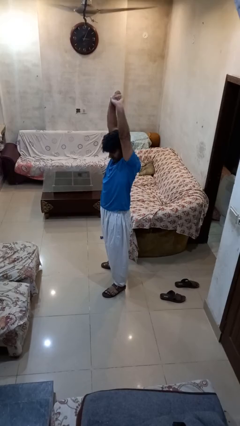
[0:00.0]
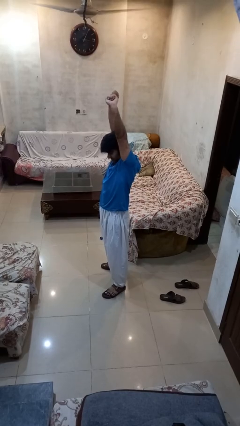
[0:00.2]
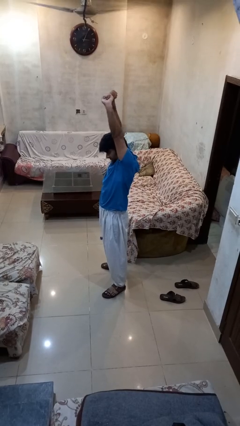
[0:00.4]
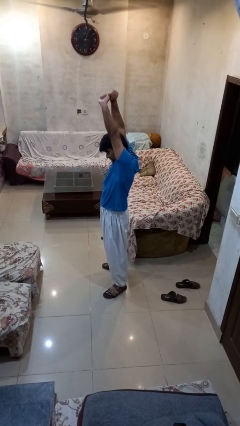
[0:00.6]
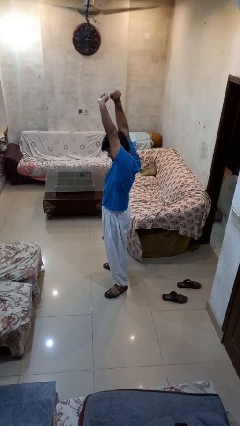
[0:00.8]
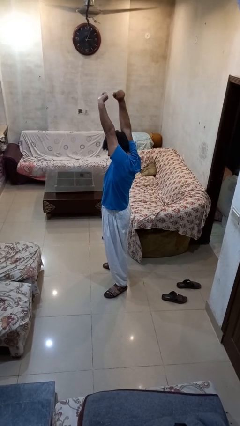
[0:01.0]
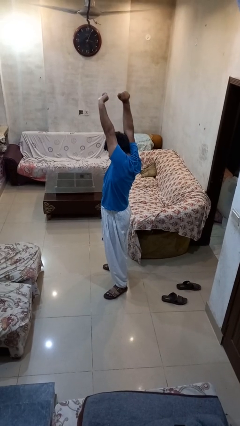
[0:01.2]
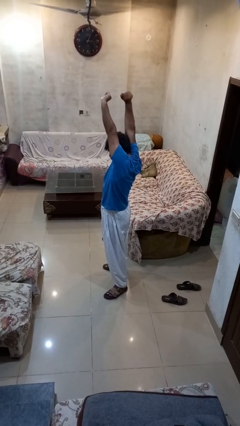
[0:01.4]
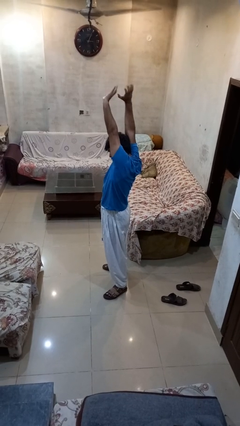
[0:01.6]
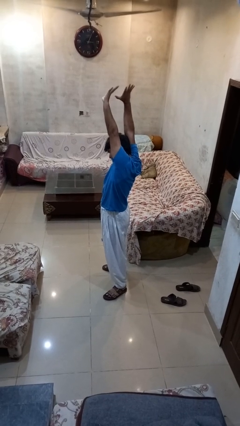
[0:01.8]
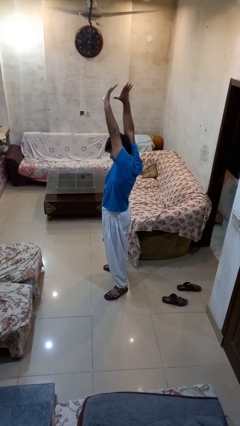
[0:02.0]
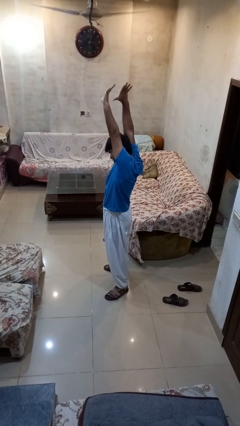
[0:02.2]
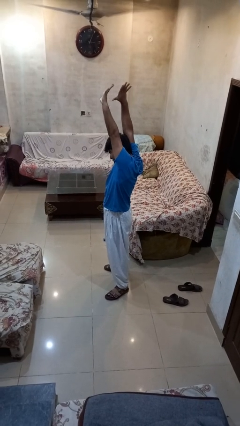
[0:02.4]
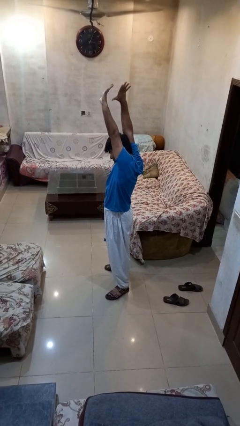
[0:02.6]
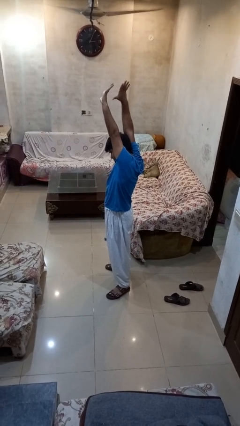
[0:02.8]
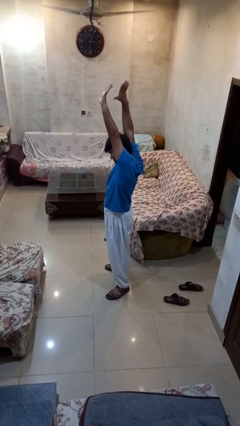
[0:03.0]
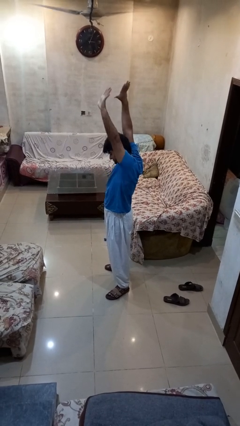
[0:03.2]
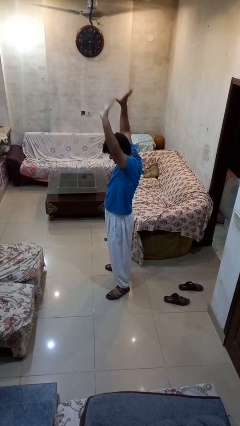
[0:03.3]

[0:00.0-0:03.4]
person stretches arms over head

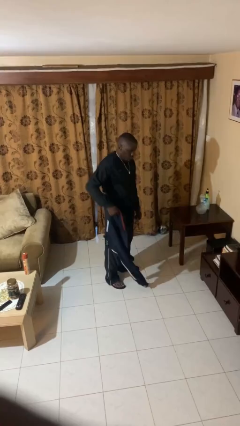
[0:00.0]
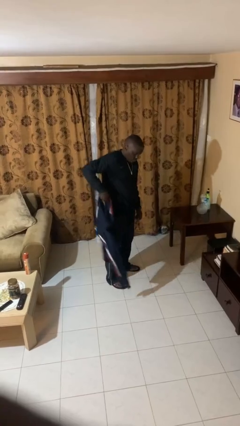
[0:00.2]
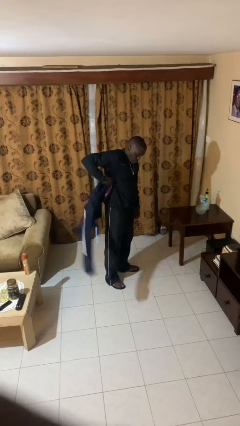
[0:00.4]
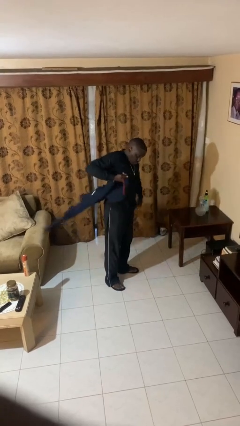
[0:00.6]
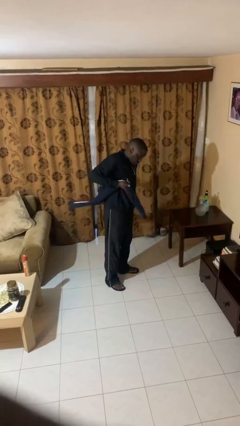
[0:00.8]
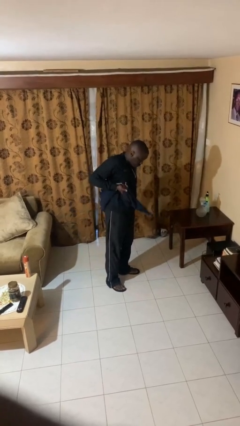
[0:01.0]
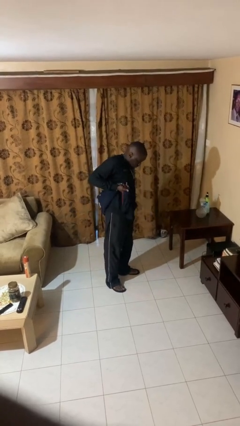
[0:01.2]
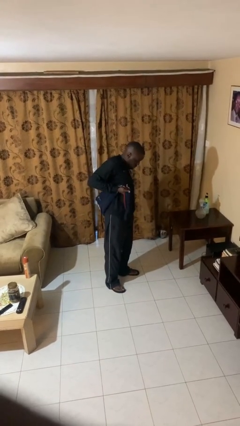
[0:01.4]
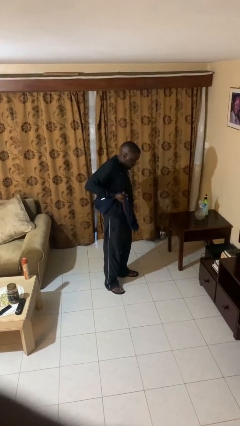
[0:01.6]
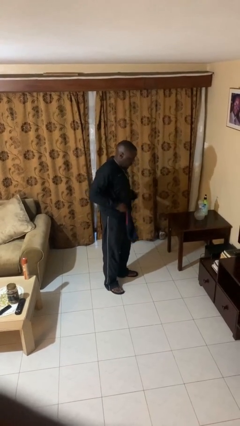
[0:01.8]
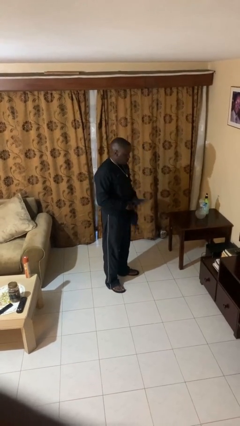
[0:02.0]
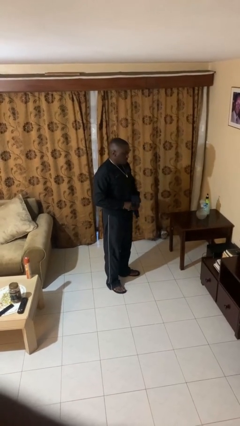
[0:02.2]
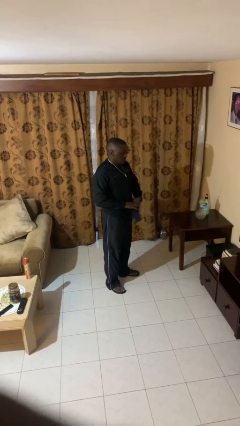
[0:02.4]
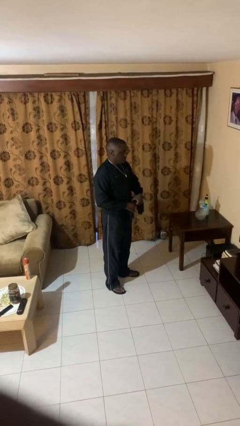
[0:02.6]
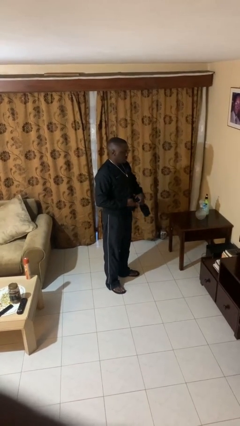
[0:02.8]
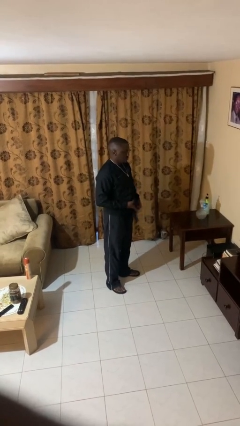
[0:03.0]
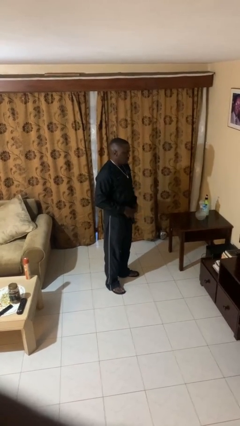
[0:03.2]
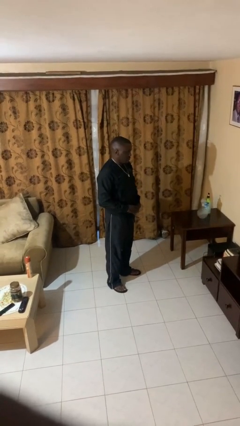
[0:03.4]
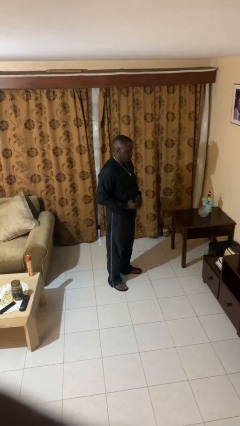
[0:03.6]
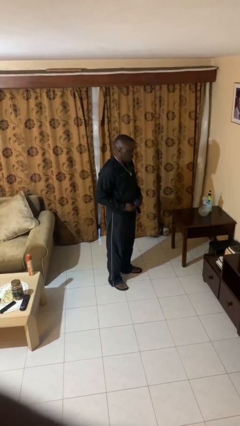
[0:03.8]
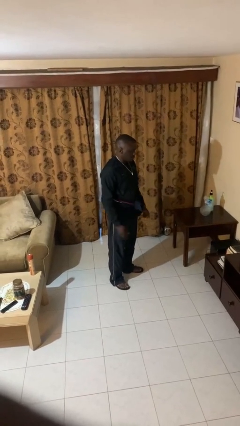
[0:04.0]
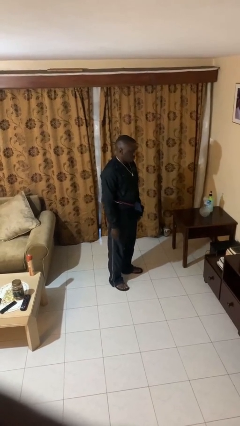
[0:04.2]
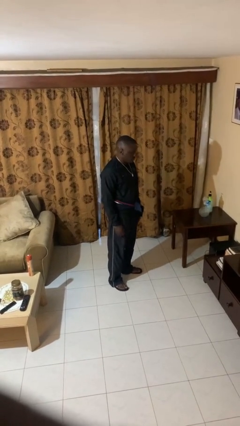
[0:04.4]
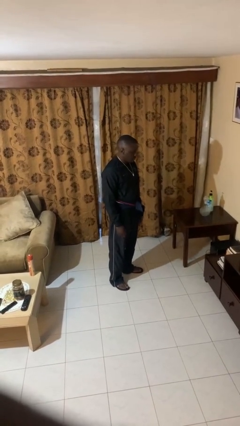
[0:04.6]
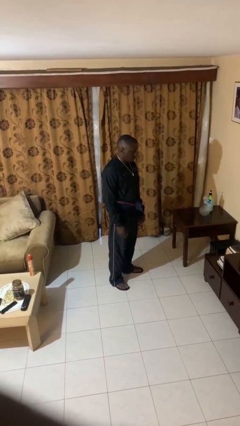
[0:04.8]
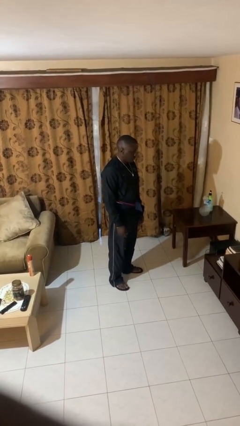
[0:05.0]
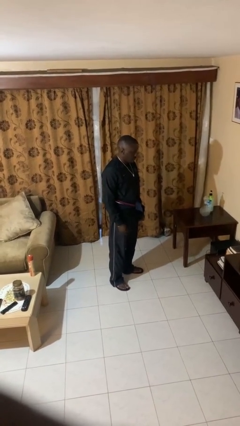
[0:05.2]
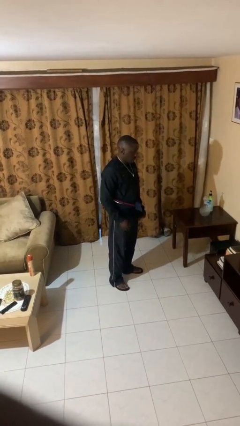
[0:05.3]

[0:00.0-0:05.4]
person ties jacket around waist

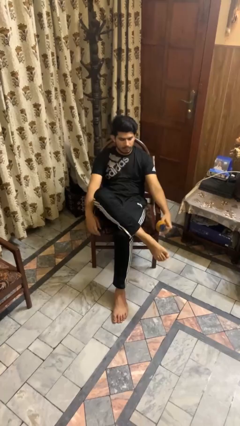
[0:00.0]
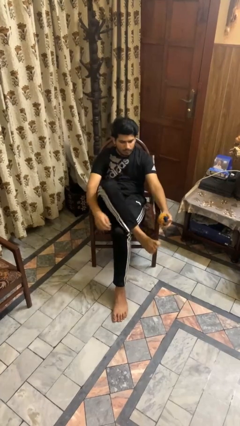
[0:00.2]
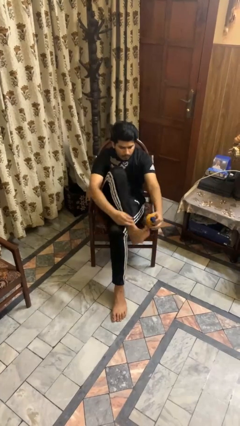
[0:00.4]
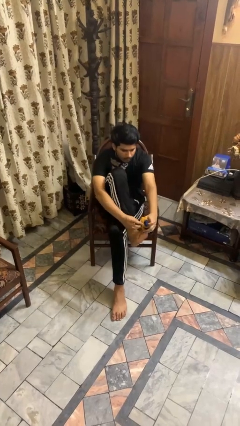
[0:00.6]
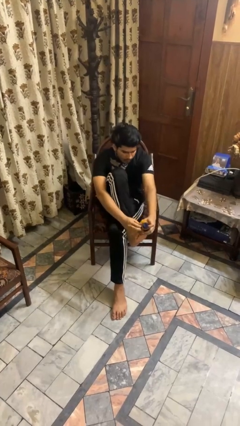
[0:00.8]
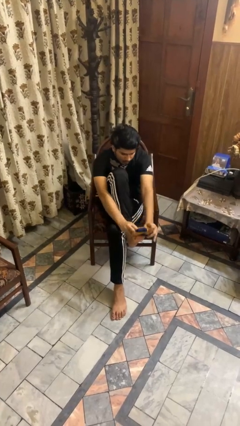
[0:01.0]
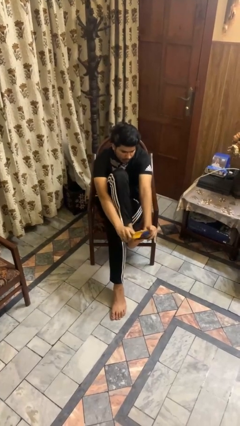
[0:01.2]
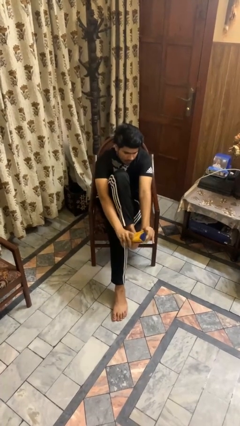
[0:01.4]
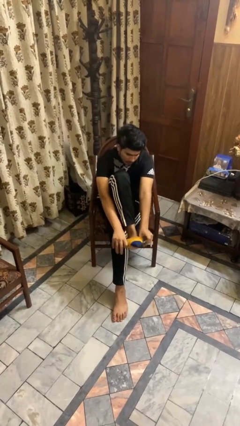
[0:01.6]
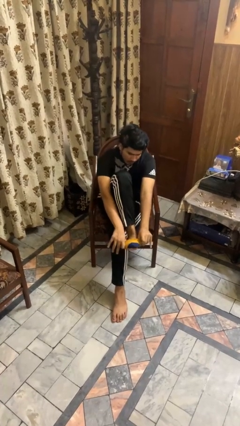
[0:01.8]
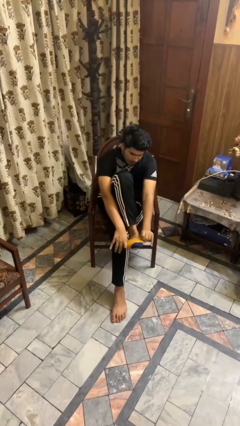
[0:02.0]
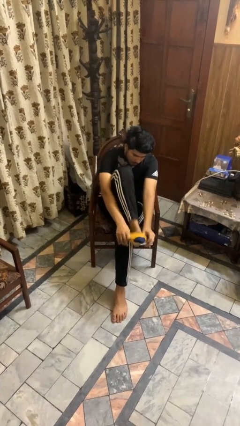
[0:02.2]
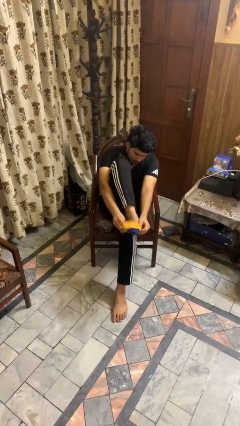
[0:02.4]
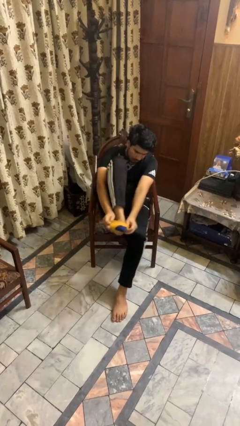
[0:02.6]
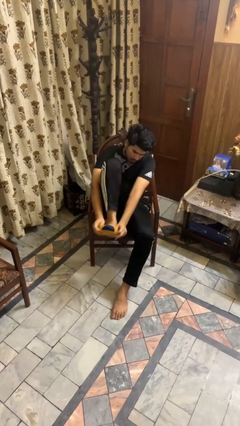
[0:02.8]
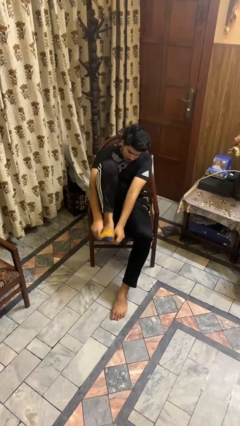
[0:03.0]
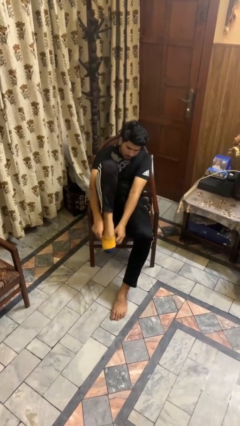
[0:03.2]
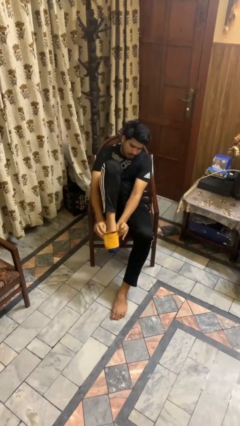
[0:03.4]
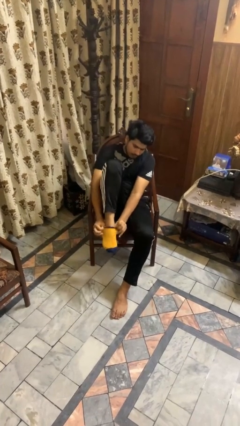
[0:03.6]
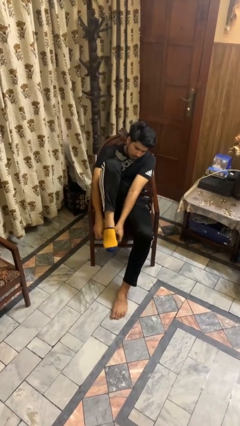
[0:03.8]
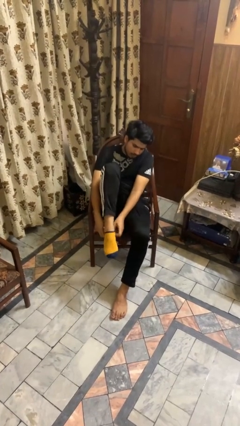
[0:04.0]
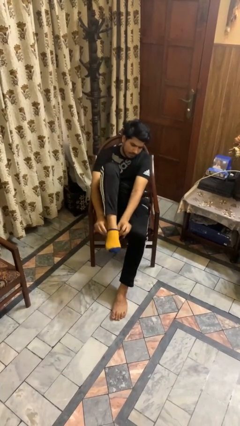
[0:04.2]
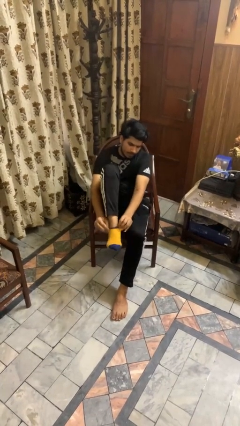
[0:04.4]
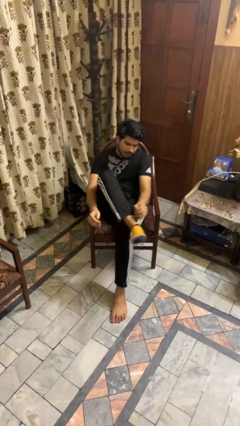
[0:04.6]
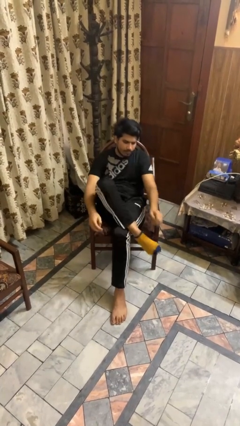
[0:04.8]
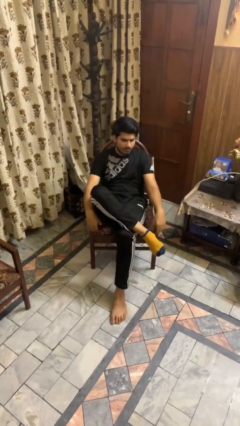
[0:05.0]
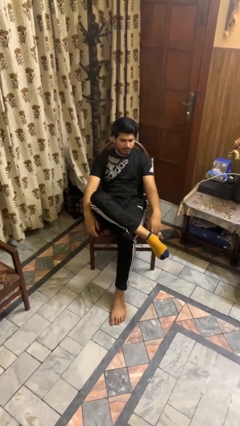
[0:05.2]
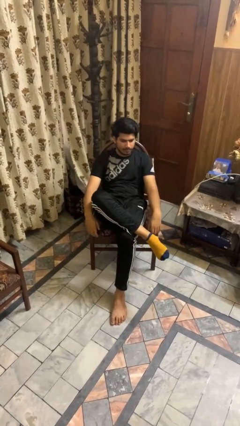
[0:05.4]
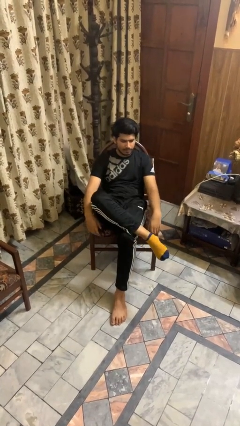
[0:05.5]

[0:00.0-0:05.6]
person puts on socks

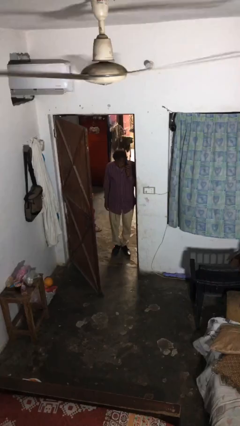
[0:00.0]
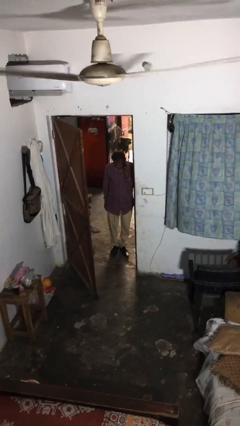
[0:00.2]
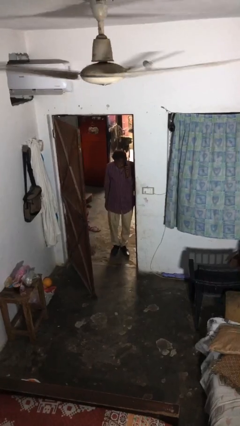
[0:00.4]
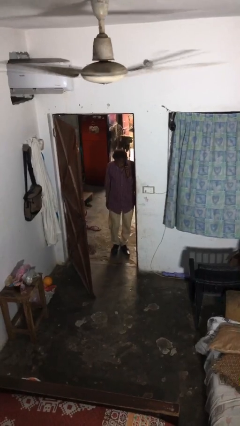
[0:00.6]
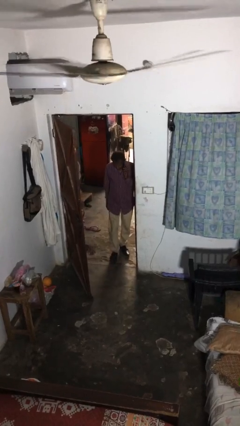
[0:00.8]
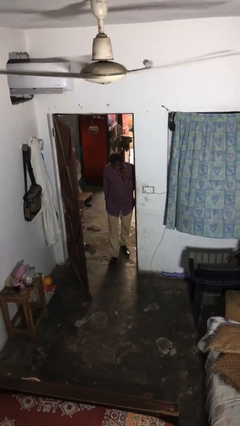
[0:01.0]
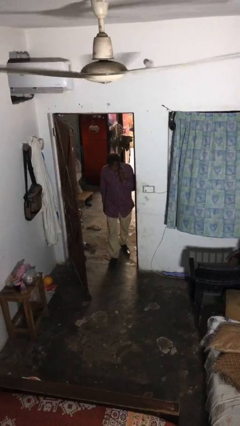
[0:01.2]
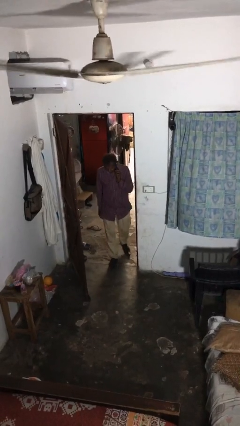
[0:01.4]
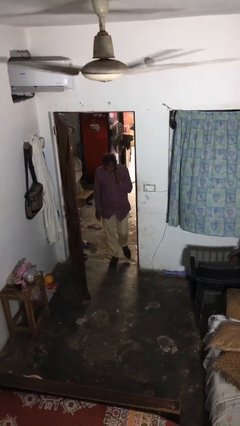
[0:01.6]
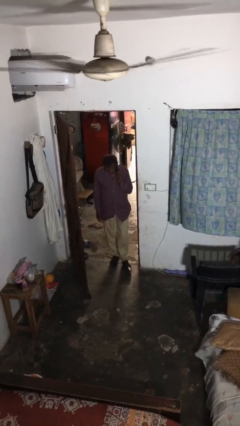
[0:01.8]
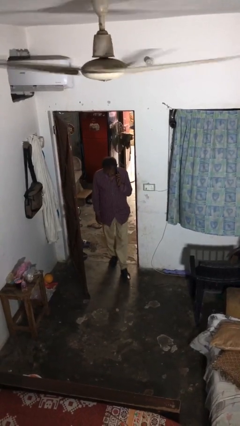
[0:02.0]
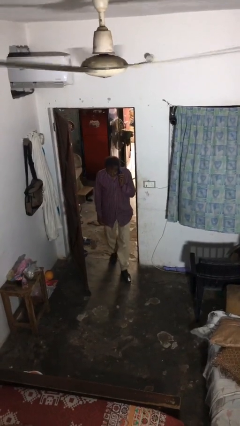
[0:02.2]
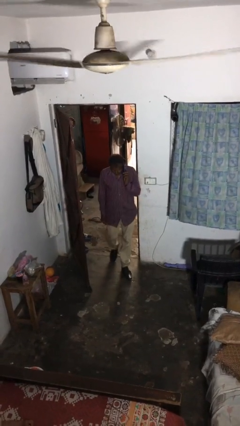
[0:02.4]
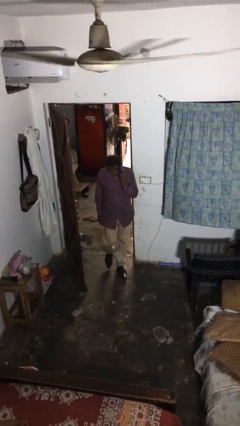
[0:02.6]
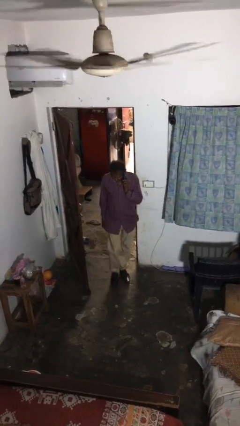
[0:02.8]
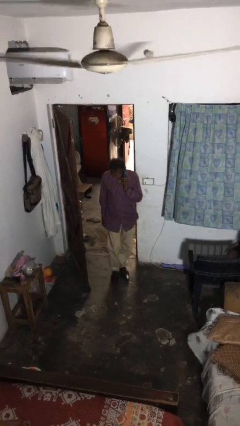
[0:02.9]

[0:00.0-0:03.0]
person enters scene through structure

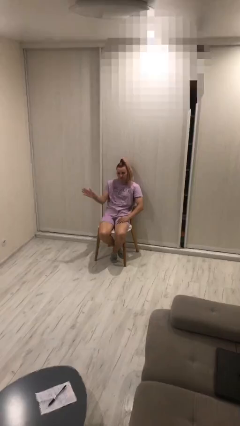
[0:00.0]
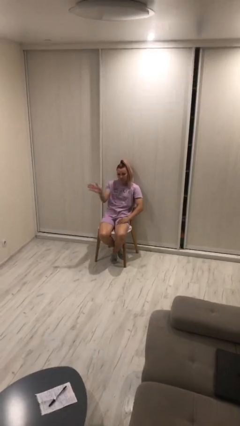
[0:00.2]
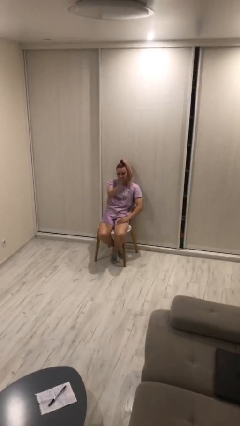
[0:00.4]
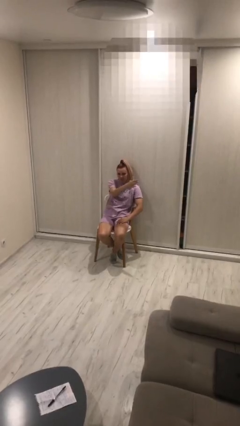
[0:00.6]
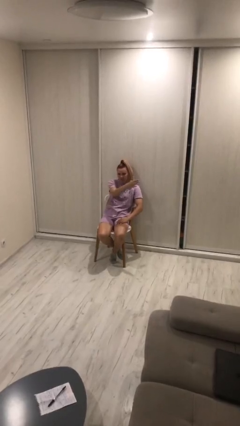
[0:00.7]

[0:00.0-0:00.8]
person gestures swipe left
